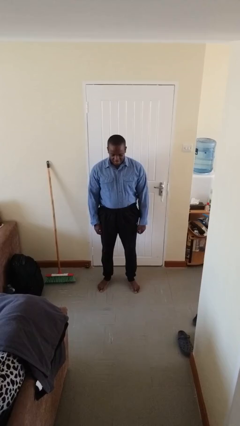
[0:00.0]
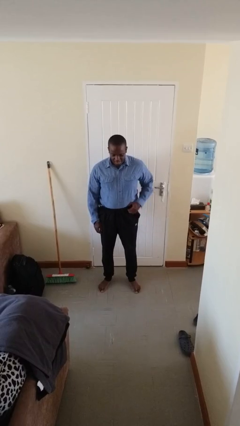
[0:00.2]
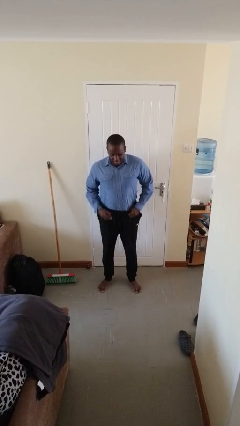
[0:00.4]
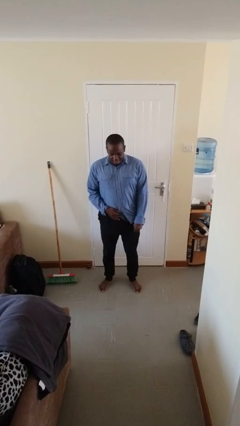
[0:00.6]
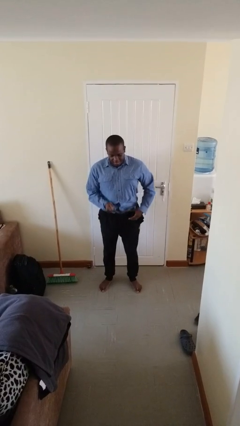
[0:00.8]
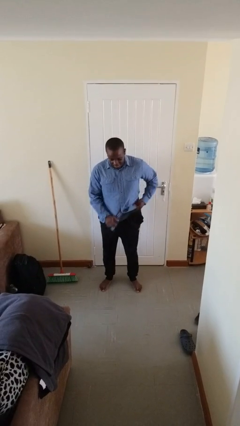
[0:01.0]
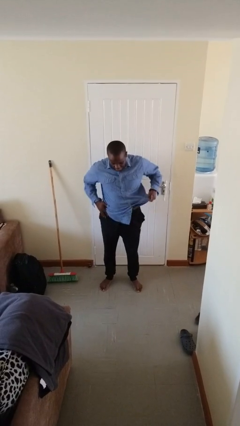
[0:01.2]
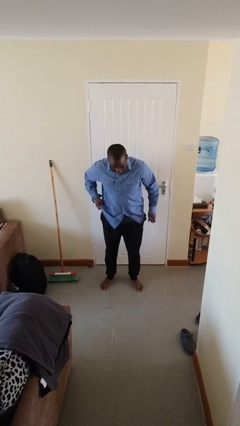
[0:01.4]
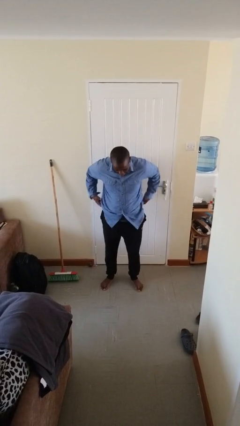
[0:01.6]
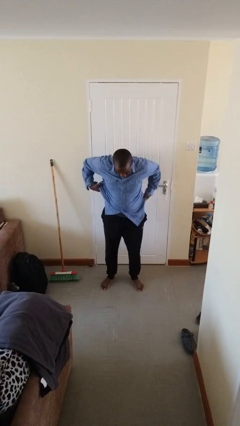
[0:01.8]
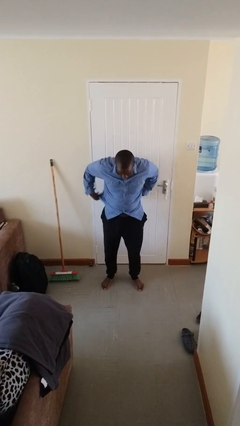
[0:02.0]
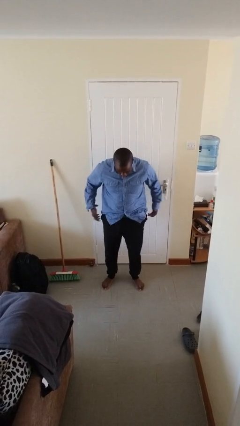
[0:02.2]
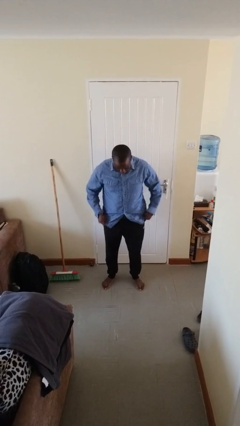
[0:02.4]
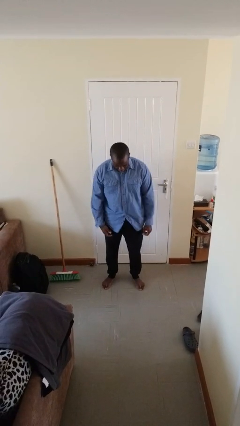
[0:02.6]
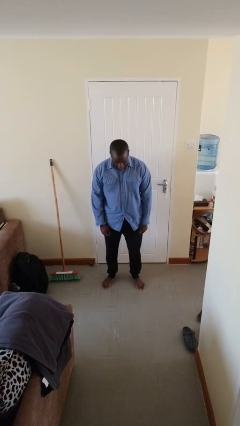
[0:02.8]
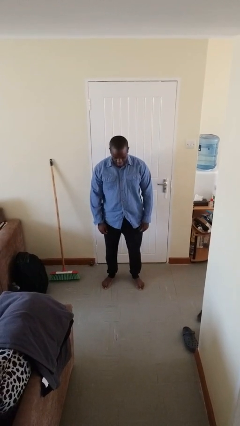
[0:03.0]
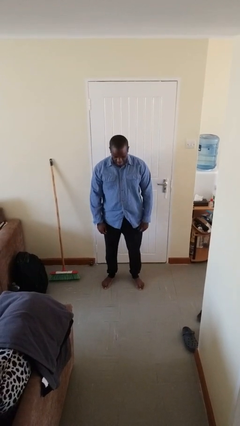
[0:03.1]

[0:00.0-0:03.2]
person untucks shirt

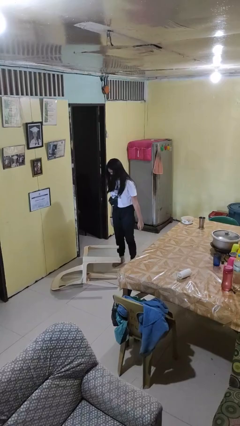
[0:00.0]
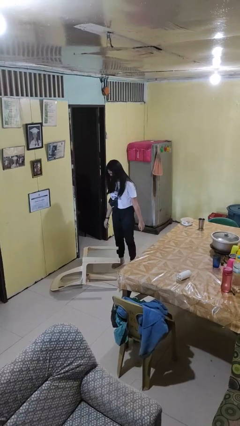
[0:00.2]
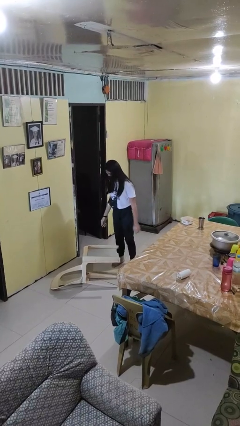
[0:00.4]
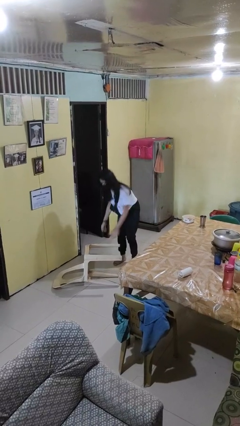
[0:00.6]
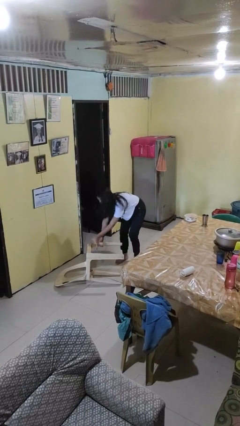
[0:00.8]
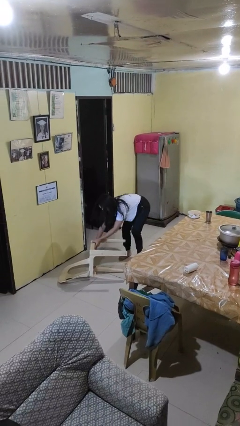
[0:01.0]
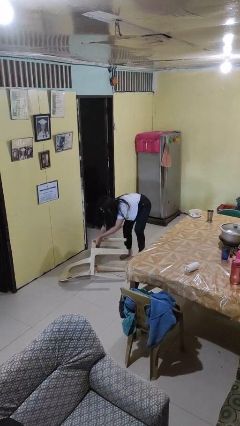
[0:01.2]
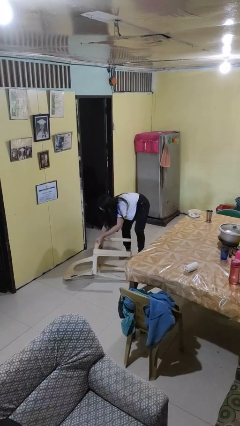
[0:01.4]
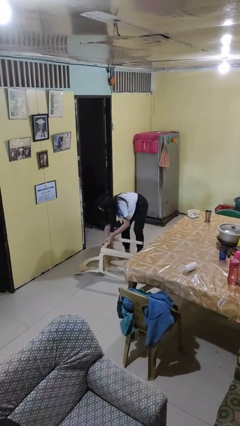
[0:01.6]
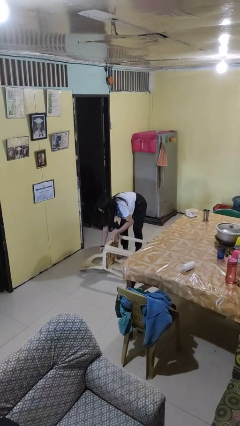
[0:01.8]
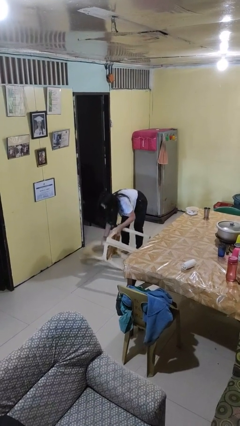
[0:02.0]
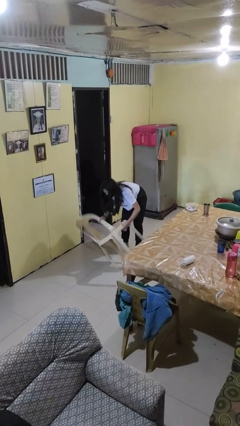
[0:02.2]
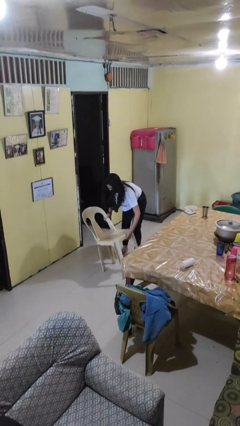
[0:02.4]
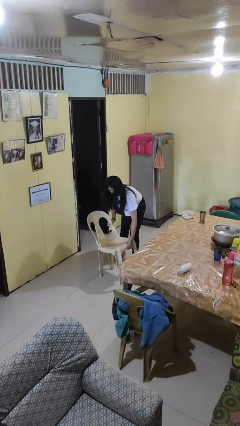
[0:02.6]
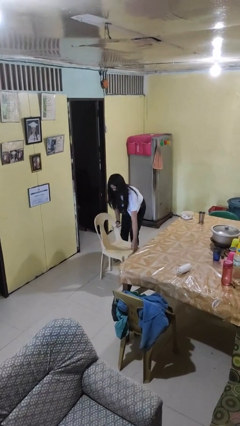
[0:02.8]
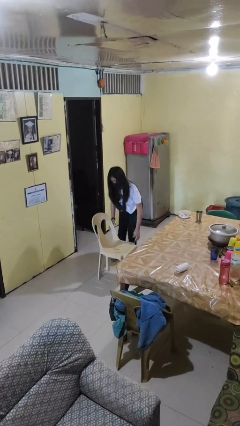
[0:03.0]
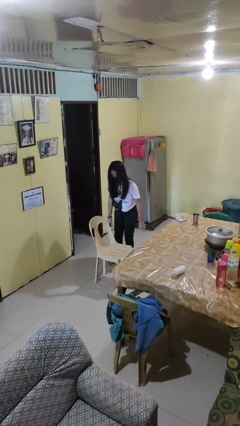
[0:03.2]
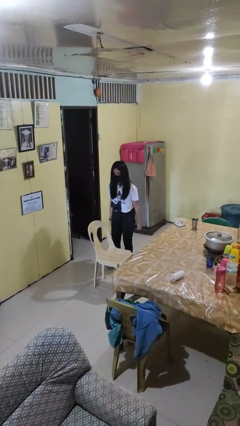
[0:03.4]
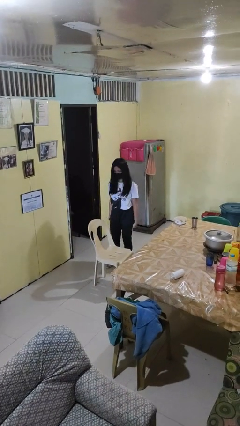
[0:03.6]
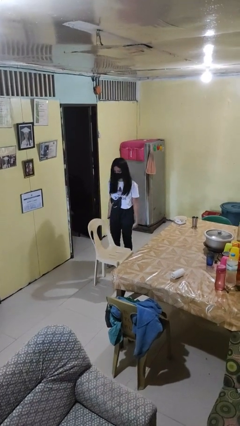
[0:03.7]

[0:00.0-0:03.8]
person sets upright furniture

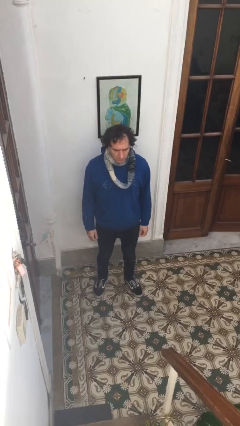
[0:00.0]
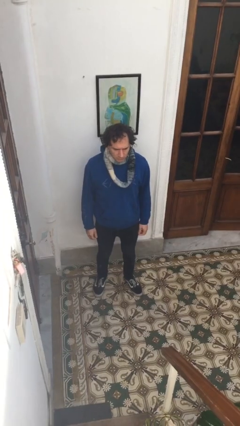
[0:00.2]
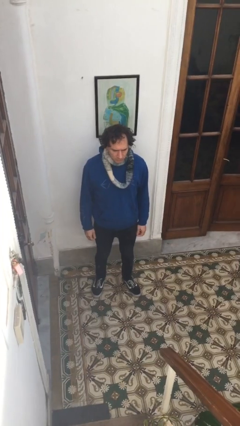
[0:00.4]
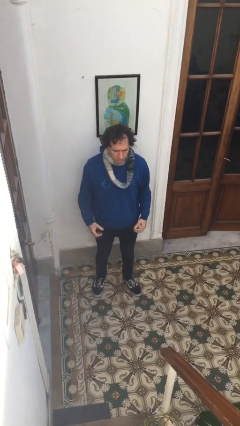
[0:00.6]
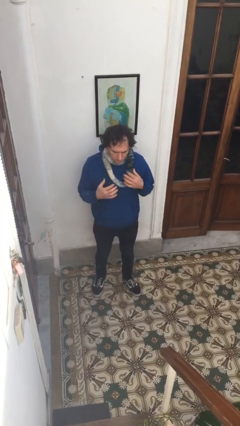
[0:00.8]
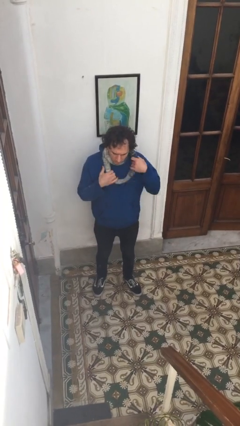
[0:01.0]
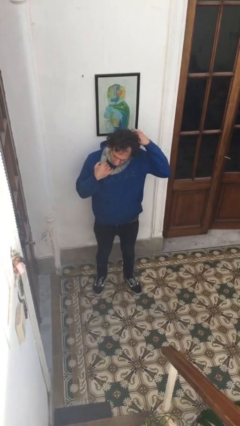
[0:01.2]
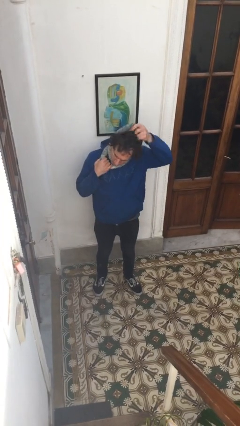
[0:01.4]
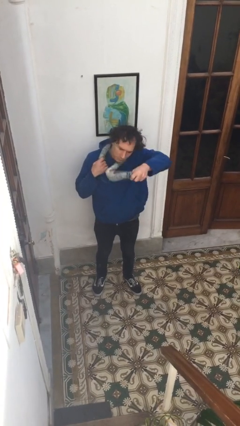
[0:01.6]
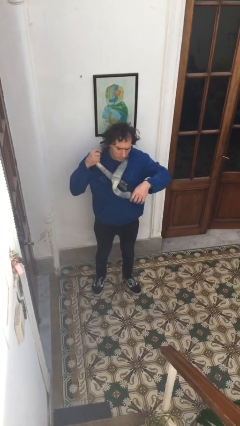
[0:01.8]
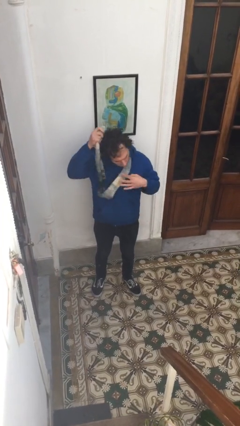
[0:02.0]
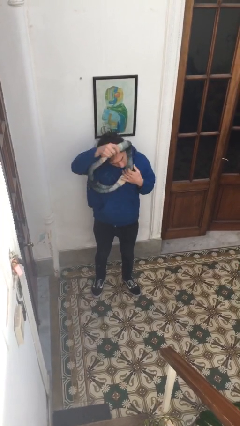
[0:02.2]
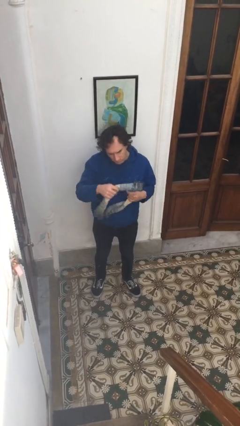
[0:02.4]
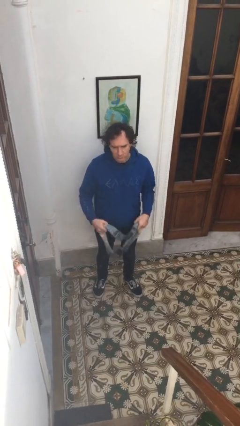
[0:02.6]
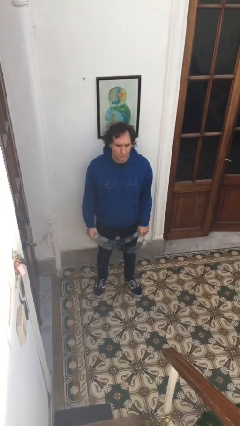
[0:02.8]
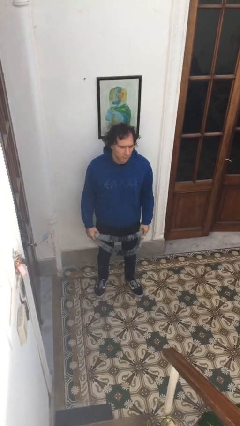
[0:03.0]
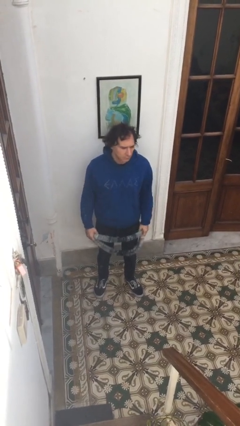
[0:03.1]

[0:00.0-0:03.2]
person takes off scarf

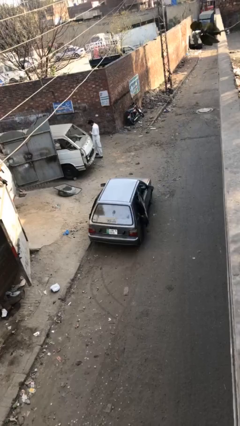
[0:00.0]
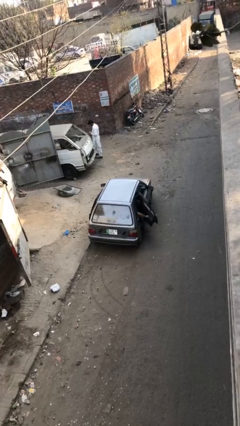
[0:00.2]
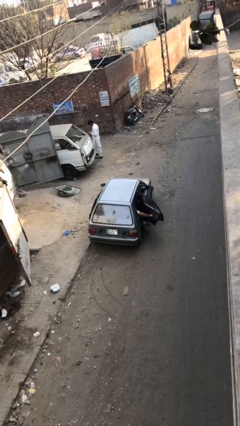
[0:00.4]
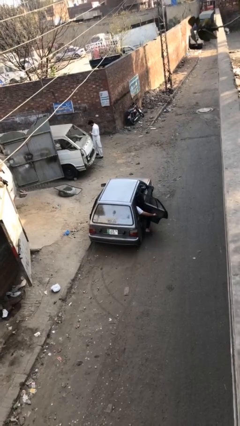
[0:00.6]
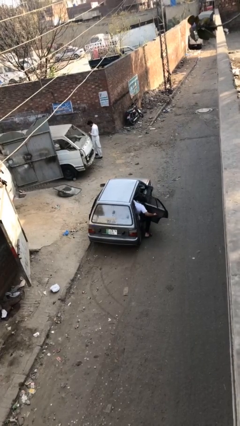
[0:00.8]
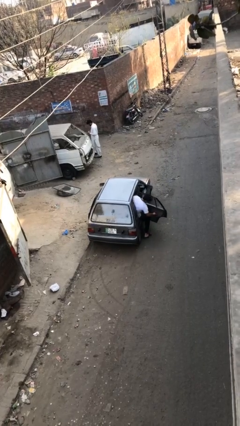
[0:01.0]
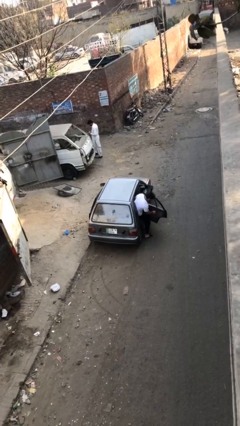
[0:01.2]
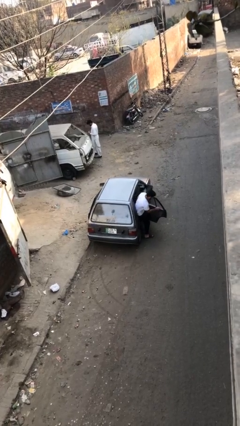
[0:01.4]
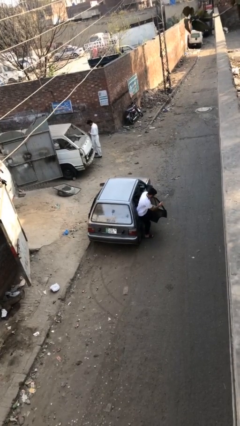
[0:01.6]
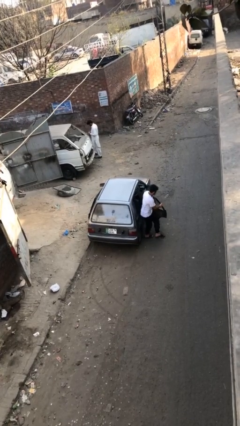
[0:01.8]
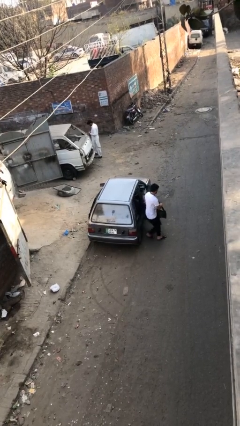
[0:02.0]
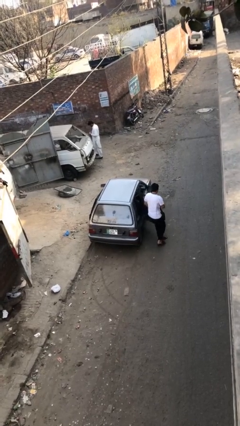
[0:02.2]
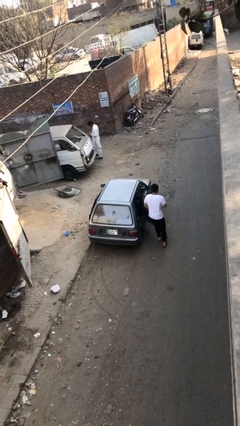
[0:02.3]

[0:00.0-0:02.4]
car drops off person

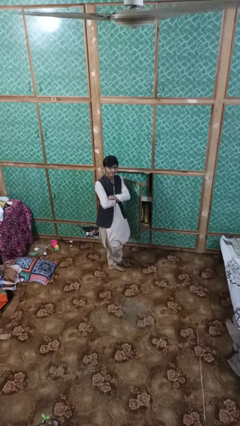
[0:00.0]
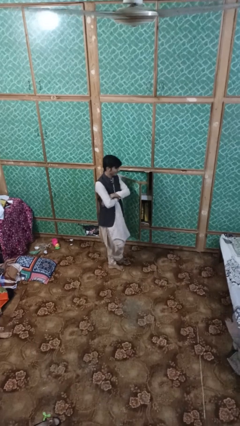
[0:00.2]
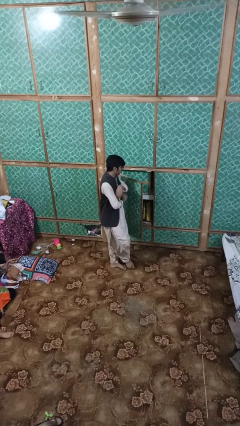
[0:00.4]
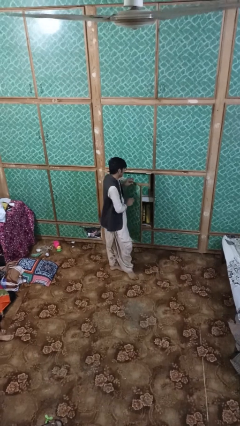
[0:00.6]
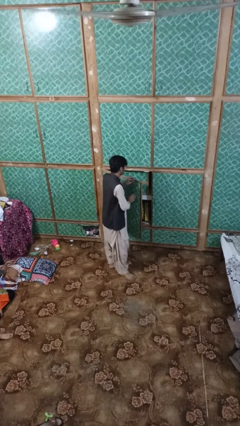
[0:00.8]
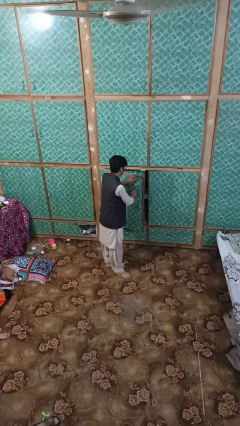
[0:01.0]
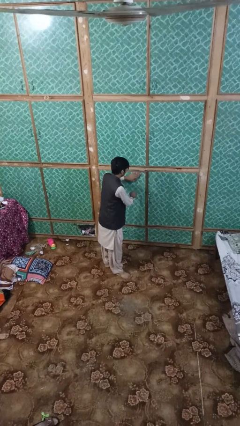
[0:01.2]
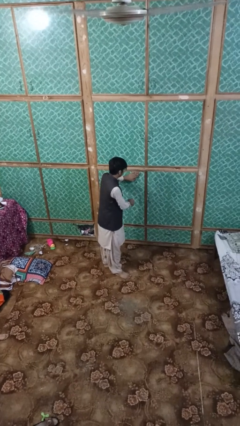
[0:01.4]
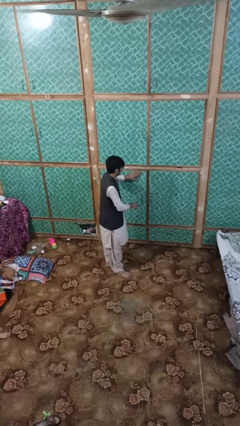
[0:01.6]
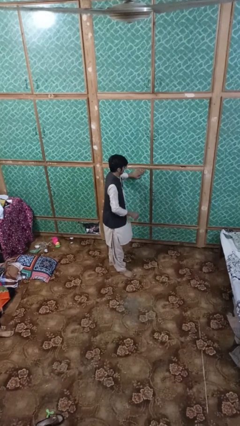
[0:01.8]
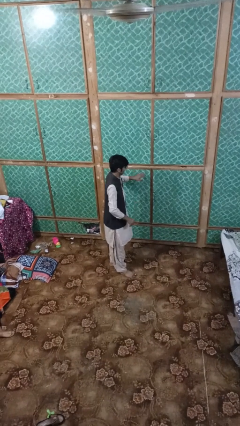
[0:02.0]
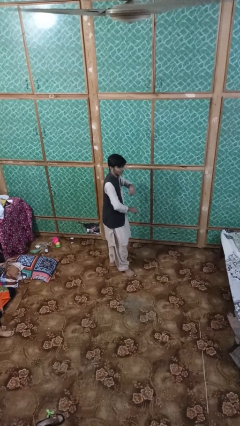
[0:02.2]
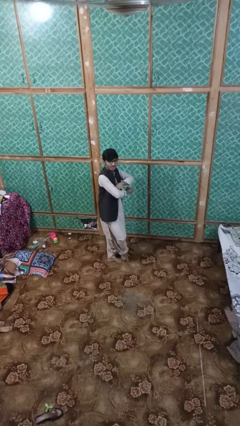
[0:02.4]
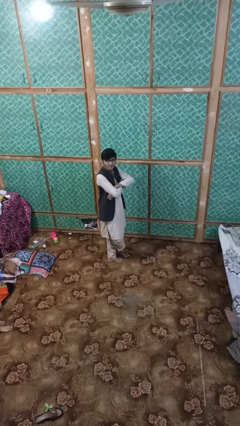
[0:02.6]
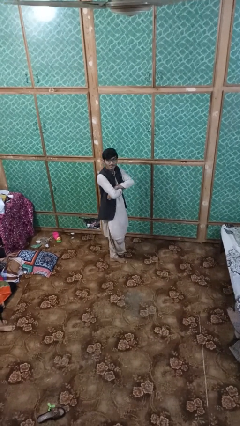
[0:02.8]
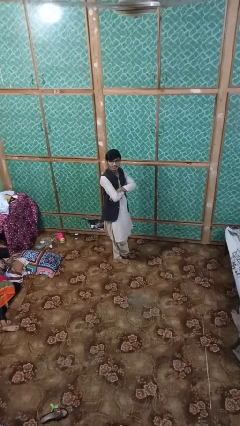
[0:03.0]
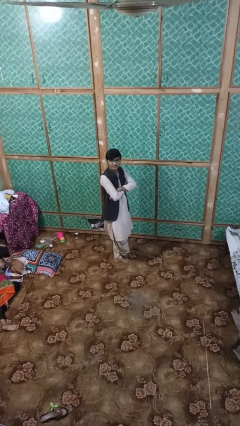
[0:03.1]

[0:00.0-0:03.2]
person closes dresser drawer

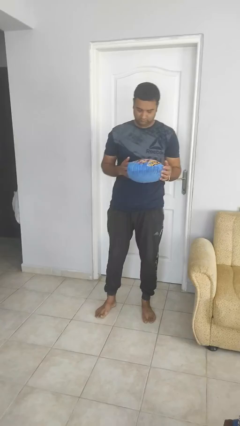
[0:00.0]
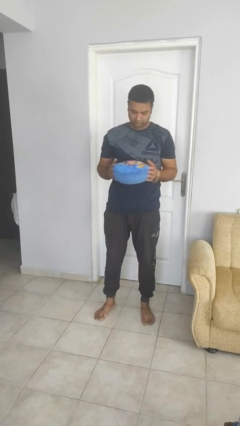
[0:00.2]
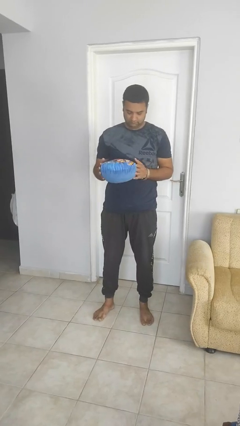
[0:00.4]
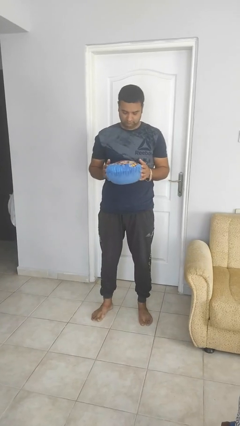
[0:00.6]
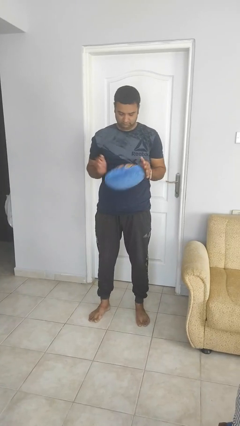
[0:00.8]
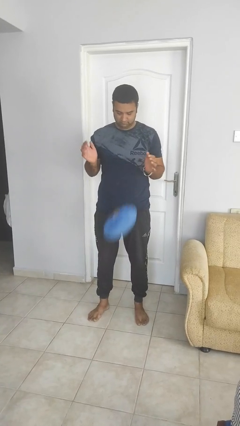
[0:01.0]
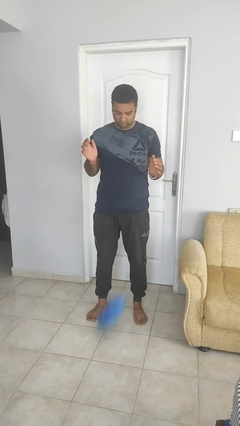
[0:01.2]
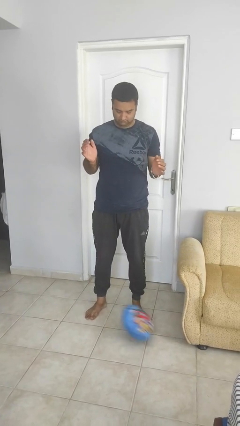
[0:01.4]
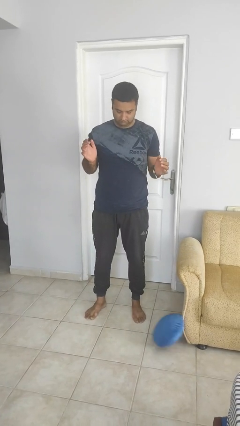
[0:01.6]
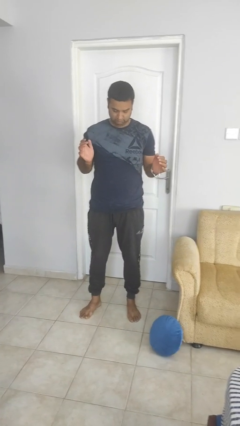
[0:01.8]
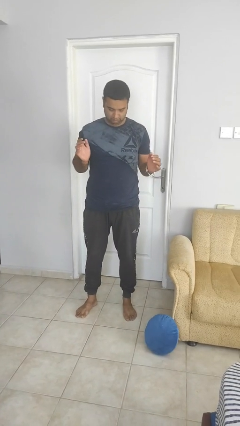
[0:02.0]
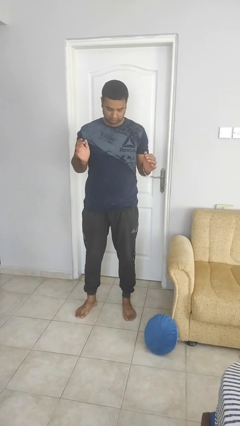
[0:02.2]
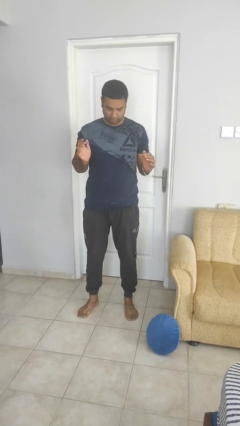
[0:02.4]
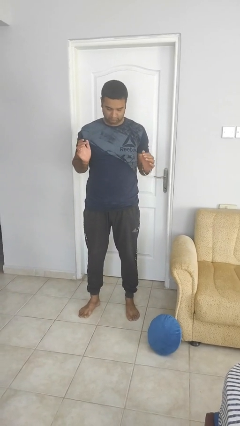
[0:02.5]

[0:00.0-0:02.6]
person drops object
